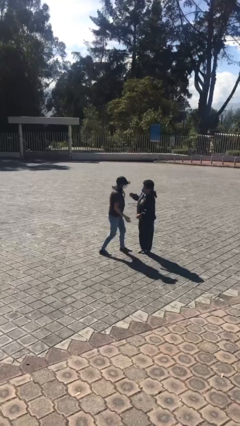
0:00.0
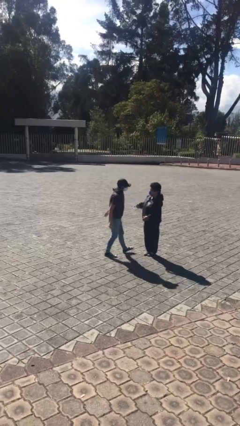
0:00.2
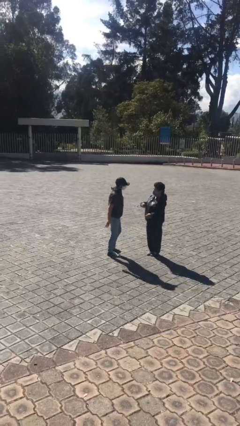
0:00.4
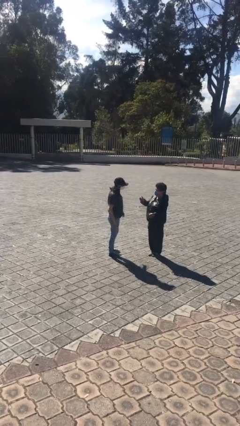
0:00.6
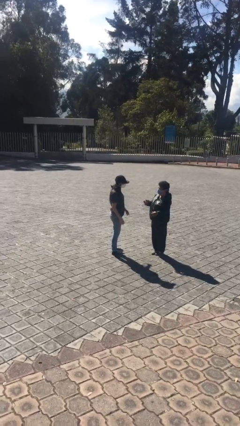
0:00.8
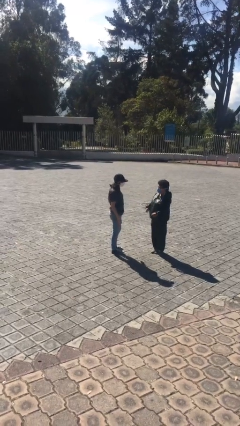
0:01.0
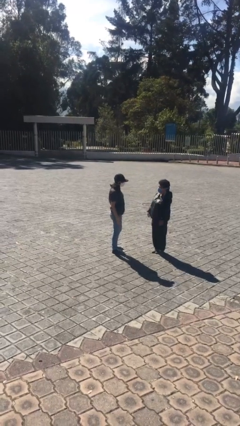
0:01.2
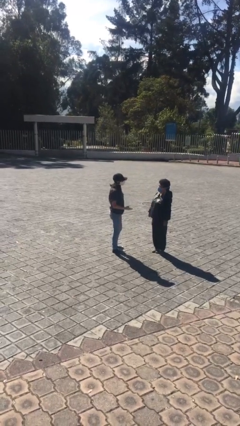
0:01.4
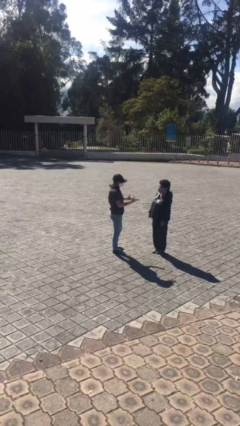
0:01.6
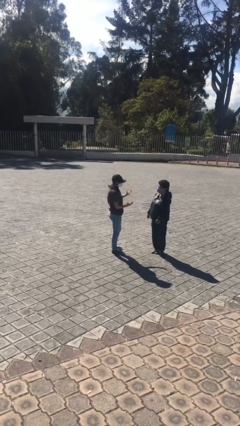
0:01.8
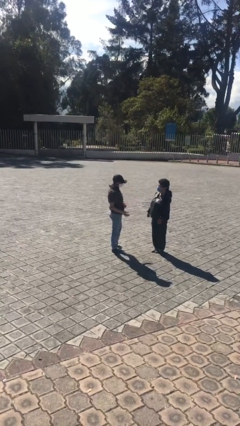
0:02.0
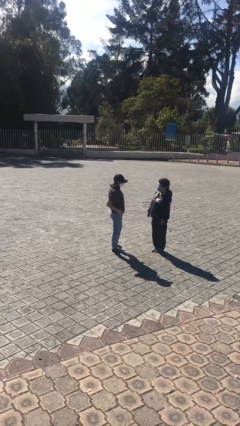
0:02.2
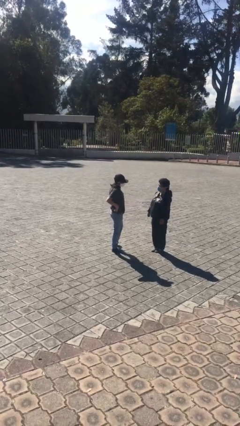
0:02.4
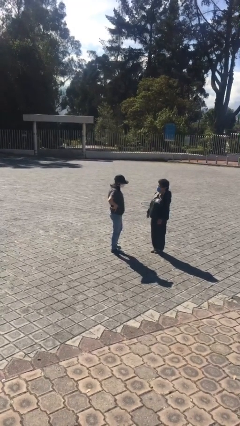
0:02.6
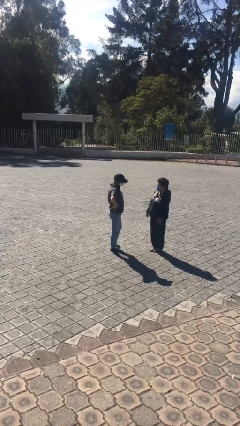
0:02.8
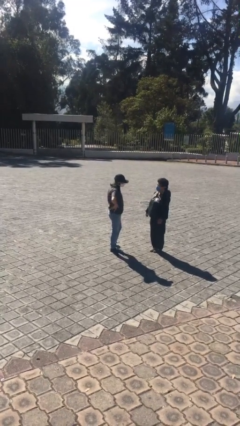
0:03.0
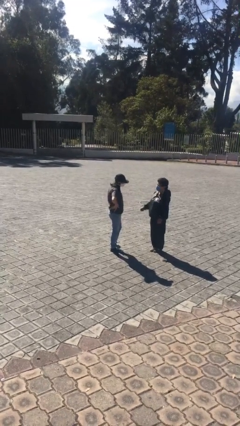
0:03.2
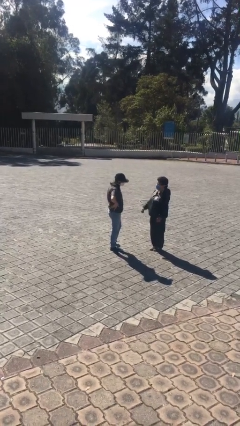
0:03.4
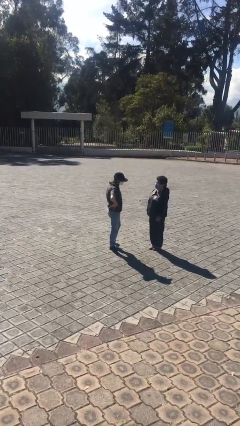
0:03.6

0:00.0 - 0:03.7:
person talks to person

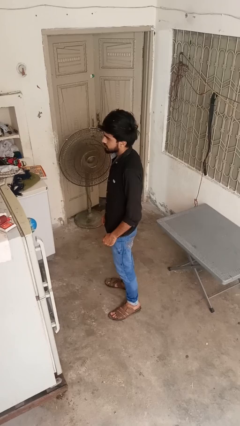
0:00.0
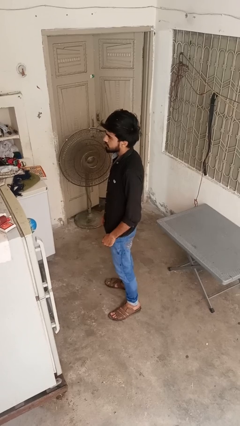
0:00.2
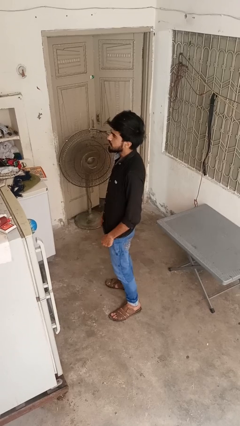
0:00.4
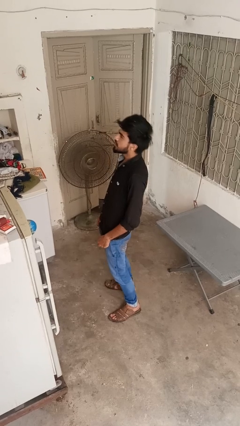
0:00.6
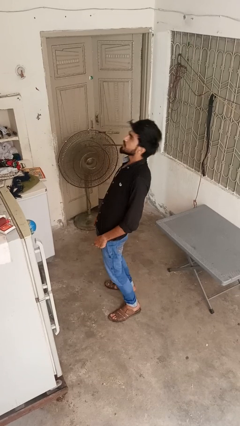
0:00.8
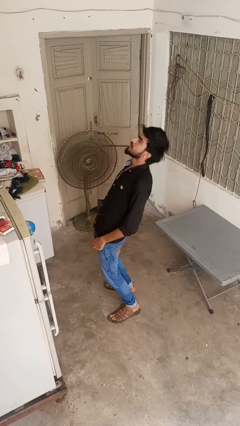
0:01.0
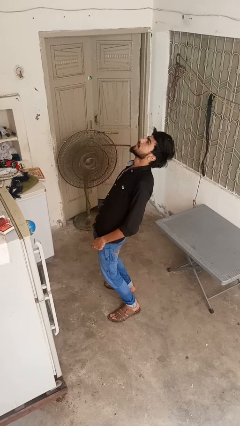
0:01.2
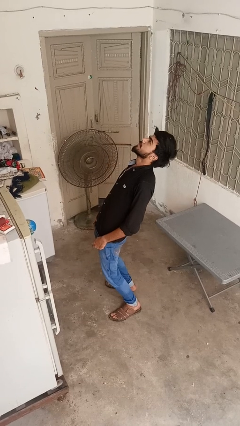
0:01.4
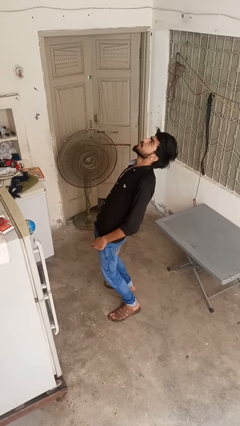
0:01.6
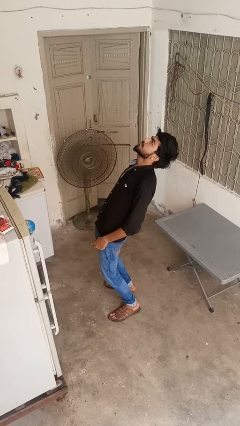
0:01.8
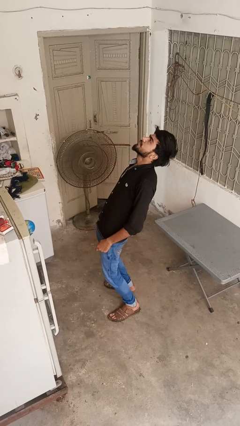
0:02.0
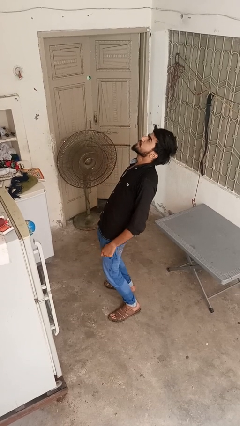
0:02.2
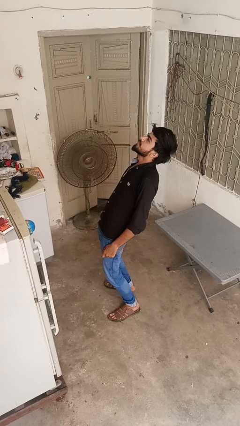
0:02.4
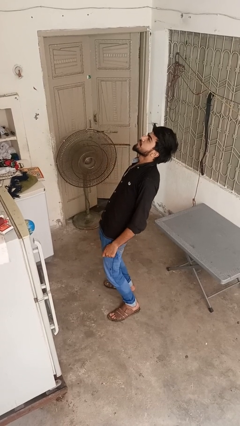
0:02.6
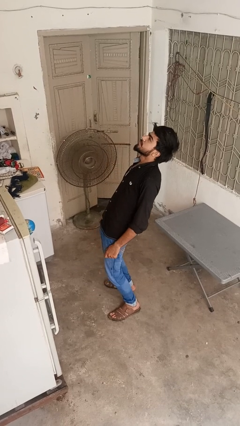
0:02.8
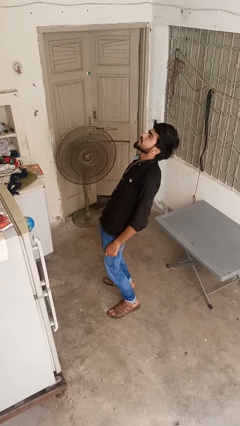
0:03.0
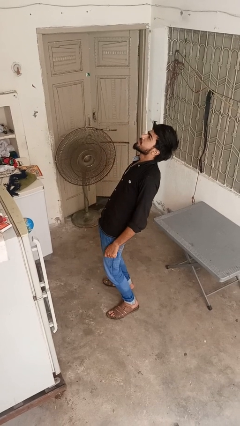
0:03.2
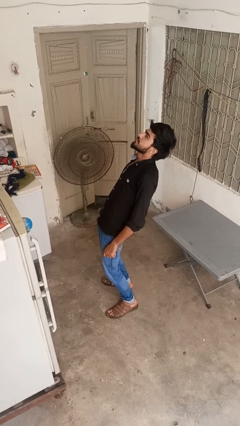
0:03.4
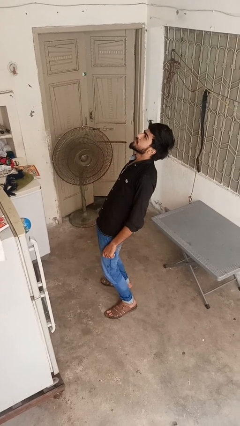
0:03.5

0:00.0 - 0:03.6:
person stretches back

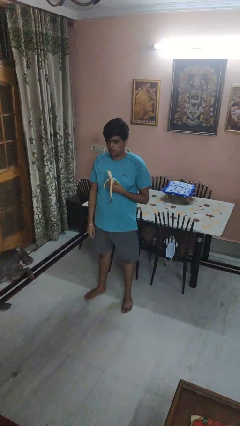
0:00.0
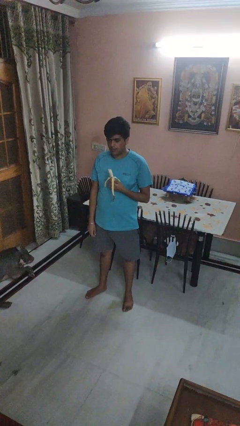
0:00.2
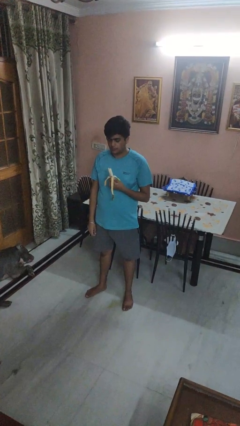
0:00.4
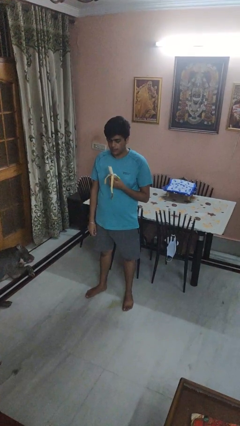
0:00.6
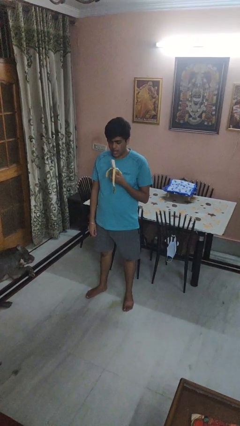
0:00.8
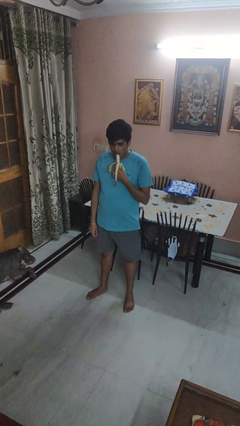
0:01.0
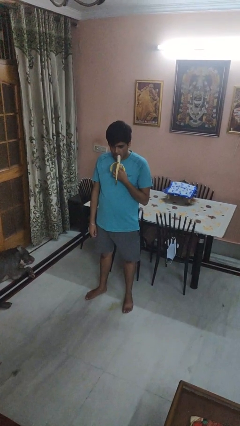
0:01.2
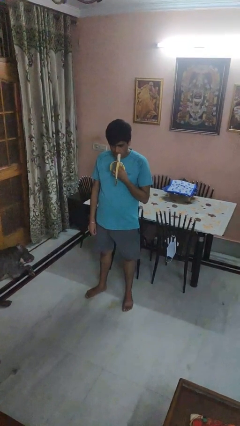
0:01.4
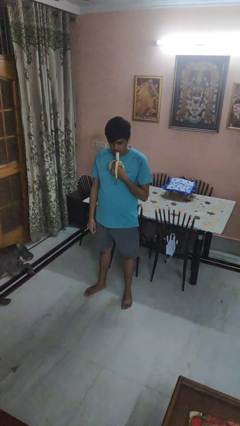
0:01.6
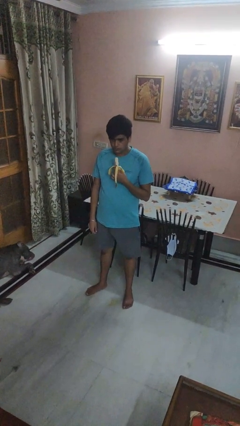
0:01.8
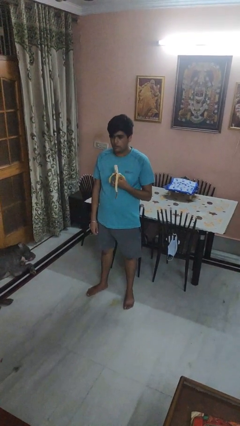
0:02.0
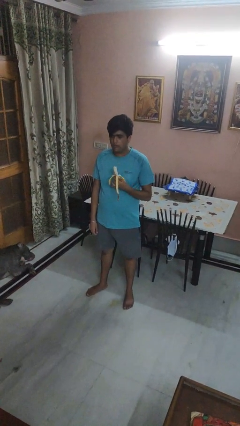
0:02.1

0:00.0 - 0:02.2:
person eats banana

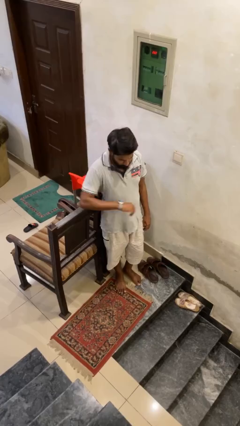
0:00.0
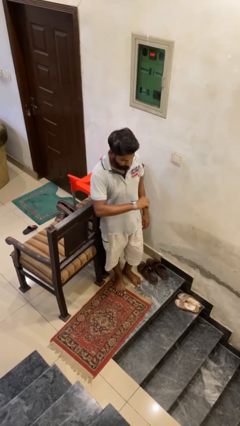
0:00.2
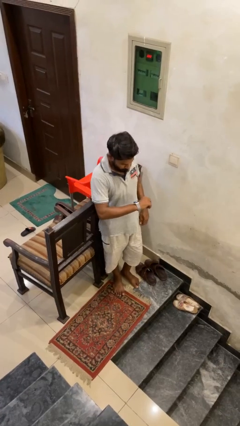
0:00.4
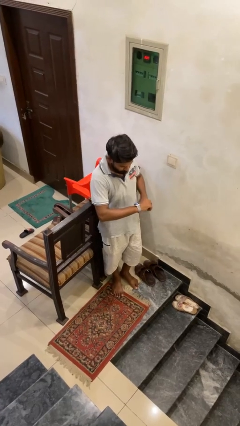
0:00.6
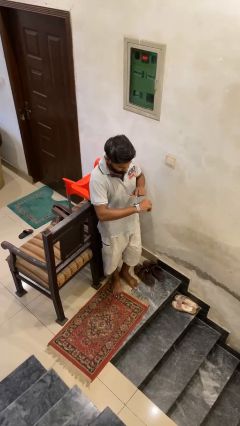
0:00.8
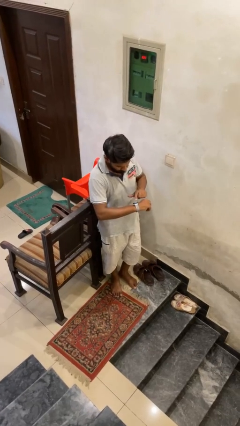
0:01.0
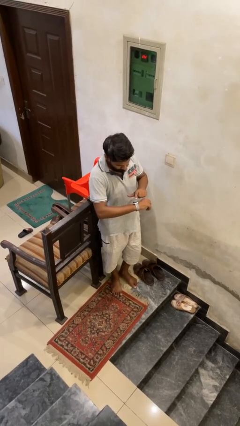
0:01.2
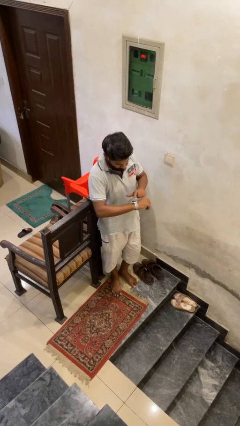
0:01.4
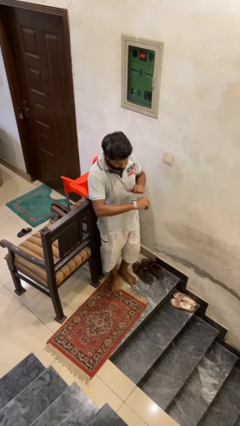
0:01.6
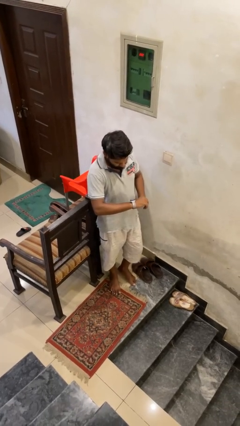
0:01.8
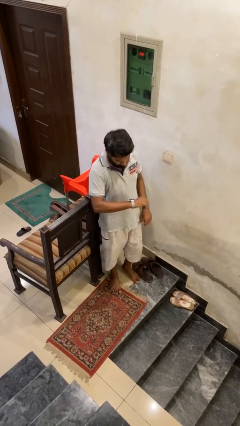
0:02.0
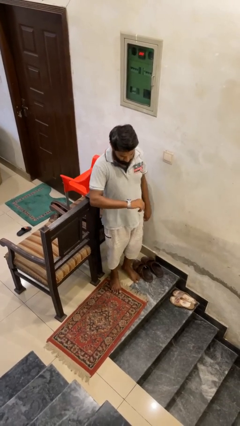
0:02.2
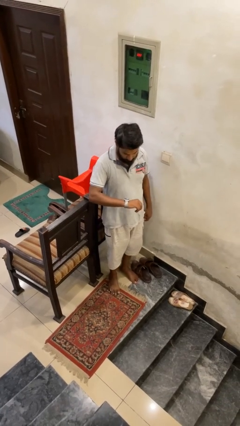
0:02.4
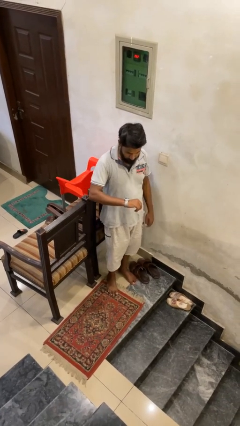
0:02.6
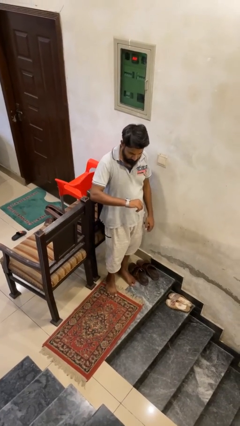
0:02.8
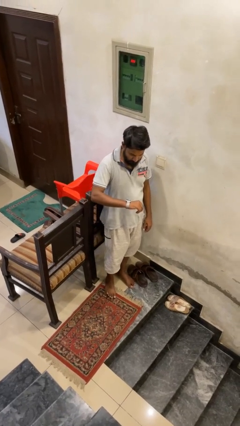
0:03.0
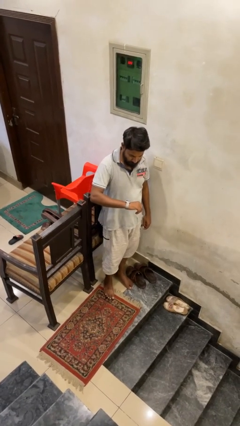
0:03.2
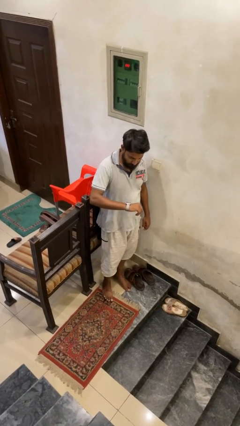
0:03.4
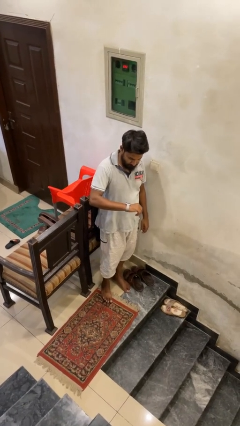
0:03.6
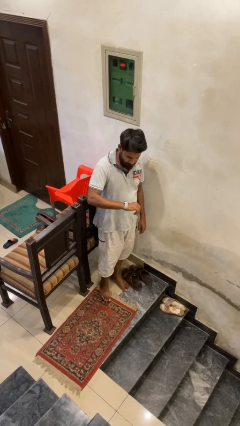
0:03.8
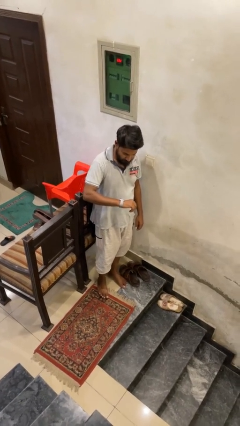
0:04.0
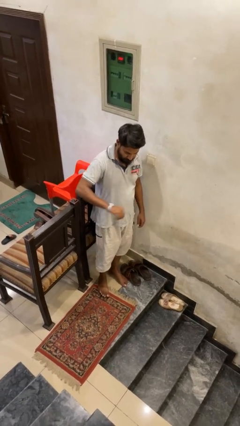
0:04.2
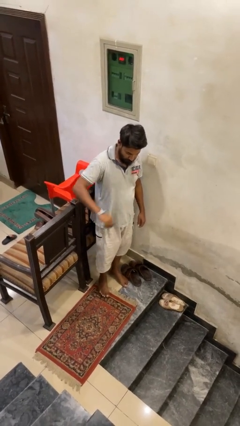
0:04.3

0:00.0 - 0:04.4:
person looks at wristwatch

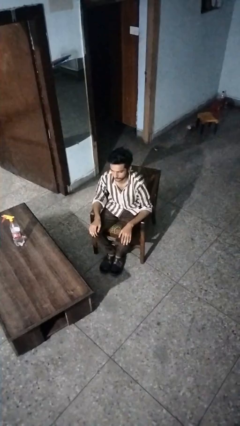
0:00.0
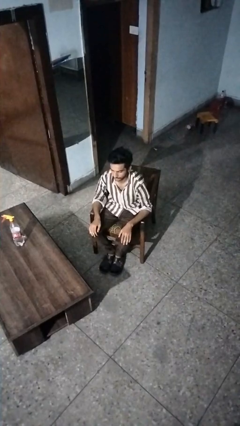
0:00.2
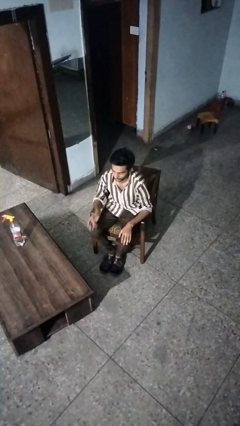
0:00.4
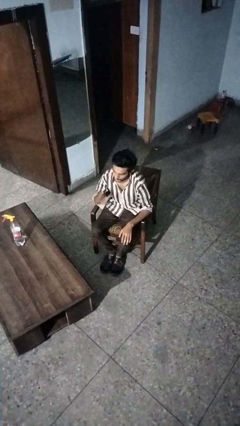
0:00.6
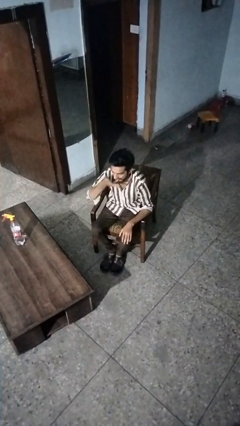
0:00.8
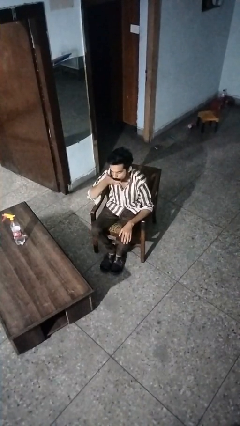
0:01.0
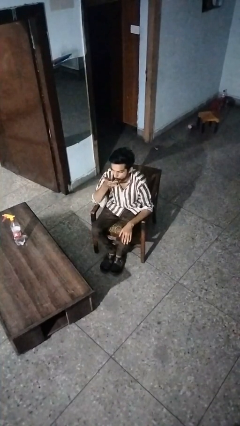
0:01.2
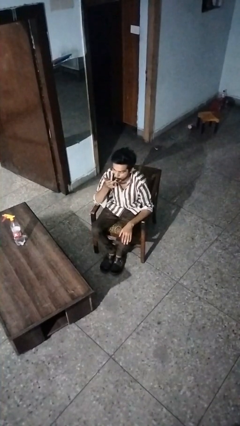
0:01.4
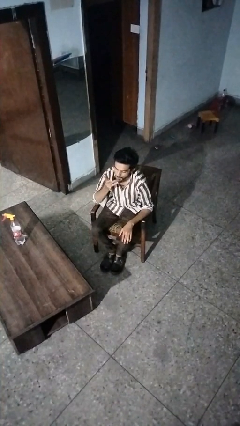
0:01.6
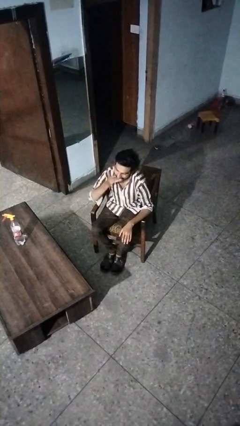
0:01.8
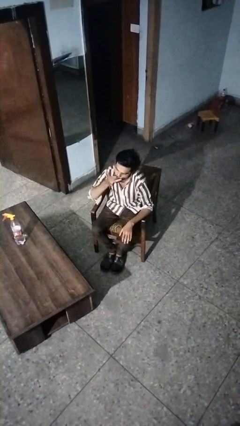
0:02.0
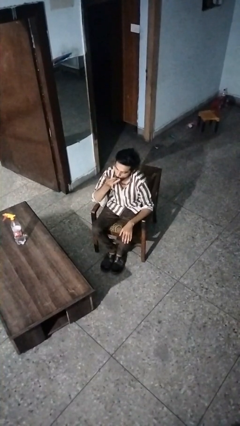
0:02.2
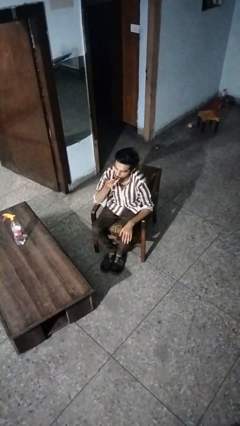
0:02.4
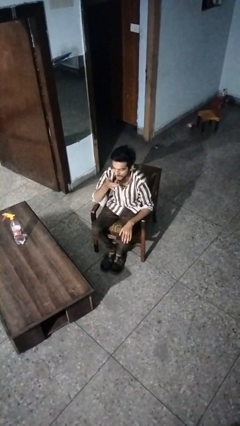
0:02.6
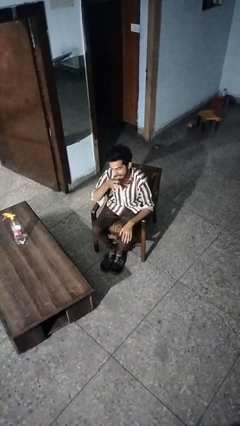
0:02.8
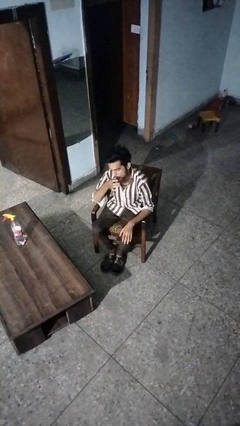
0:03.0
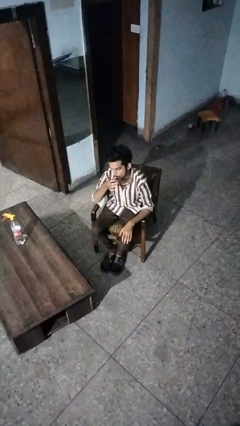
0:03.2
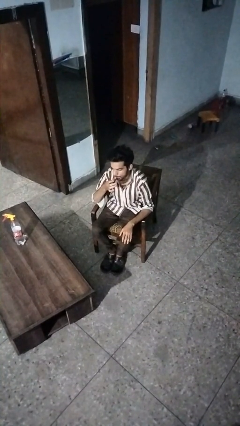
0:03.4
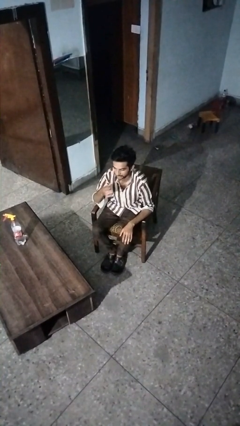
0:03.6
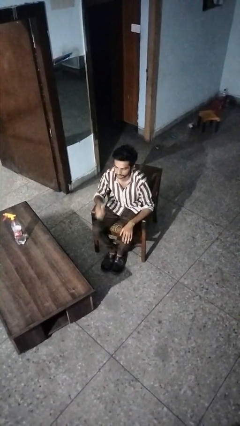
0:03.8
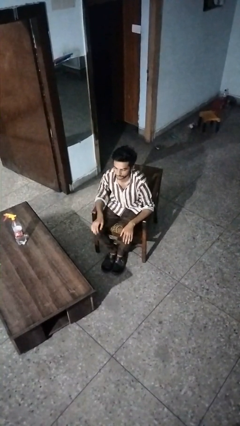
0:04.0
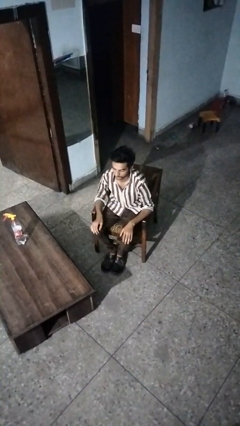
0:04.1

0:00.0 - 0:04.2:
person licks fingers
